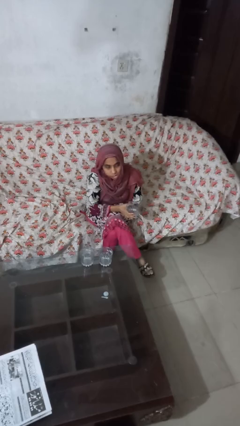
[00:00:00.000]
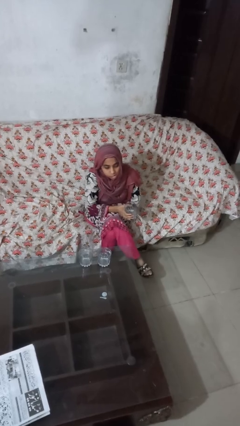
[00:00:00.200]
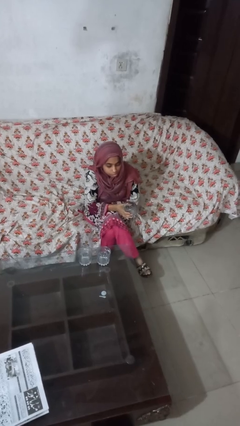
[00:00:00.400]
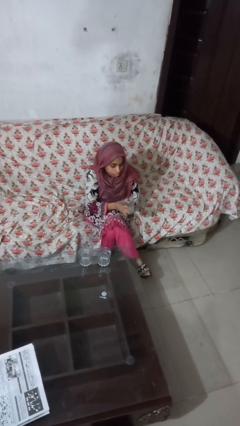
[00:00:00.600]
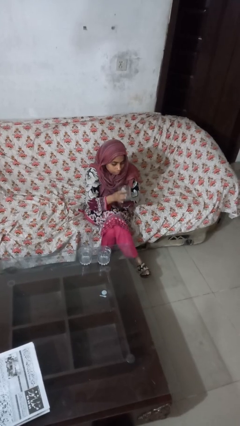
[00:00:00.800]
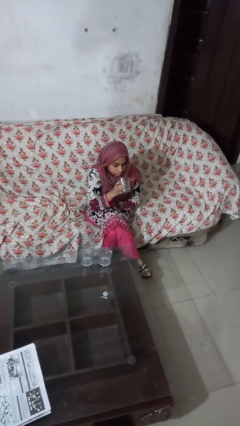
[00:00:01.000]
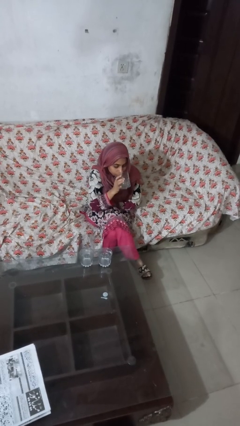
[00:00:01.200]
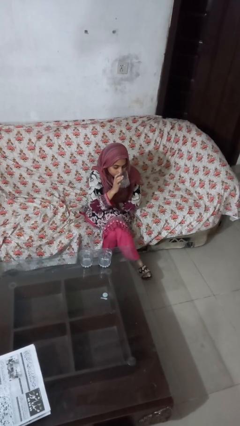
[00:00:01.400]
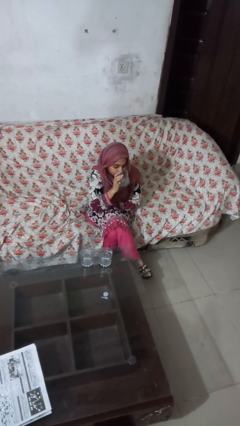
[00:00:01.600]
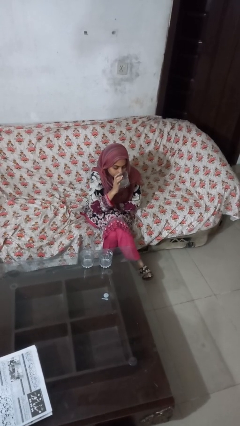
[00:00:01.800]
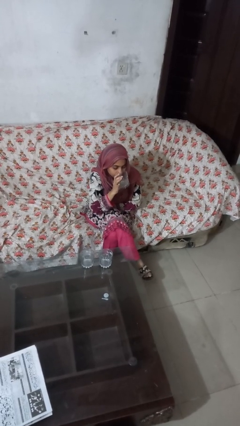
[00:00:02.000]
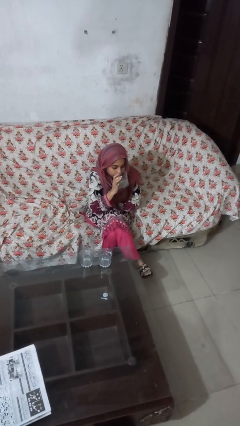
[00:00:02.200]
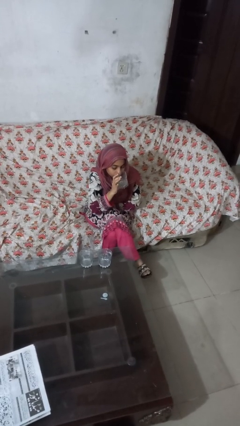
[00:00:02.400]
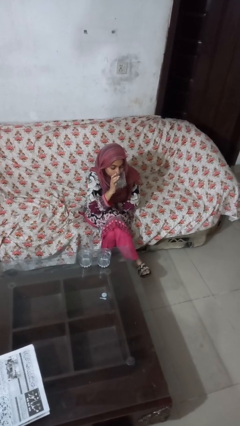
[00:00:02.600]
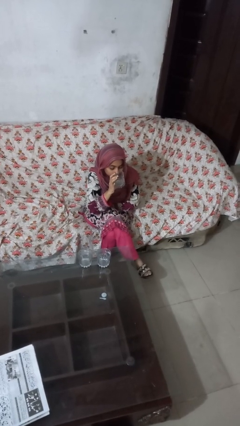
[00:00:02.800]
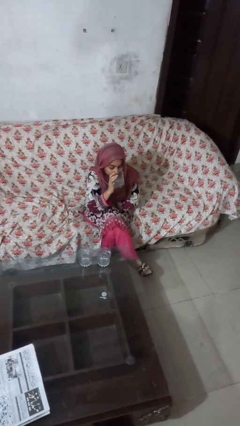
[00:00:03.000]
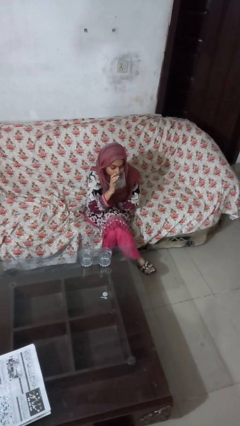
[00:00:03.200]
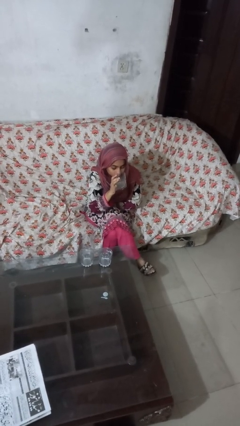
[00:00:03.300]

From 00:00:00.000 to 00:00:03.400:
person drinks from shotglass

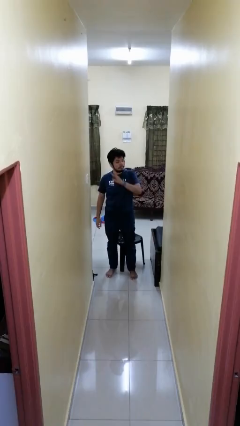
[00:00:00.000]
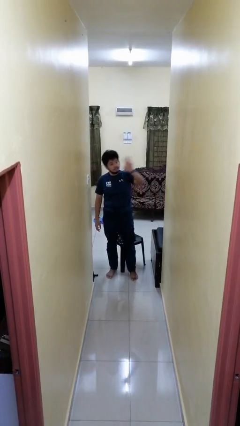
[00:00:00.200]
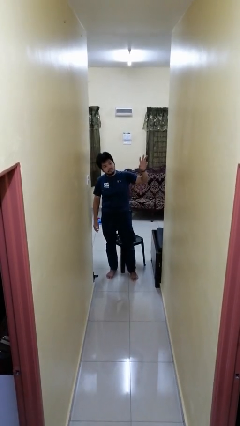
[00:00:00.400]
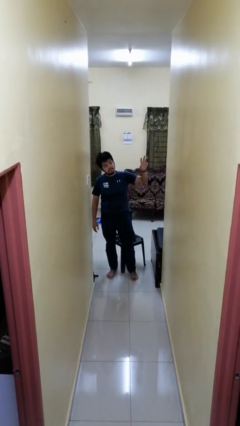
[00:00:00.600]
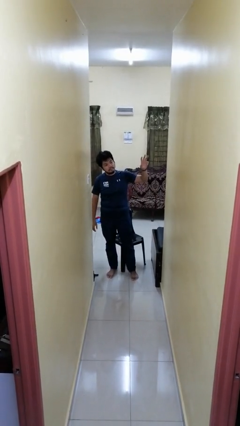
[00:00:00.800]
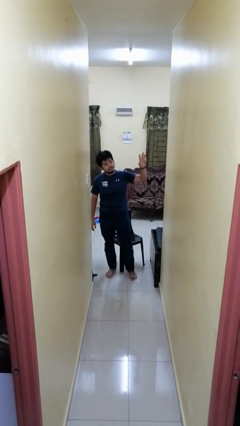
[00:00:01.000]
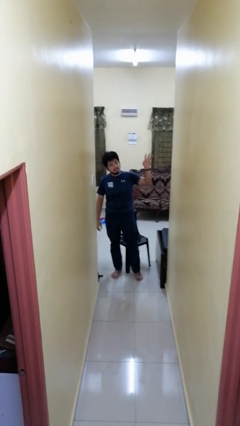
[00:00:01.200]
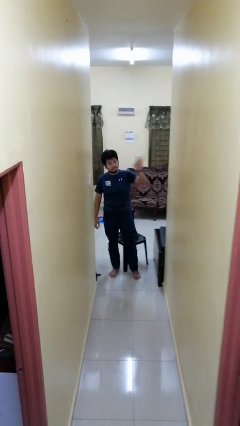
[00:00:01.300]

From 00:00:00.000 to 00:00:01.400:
person gestures swipe left

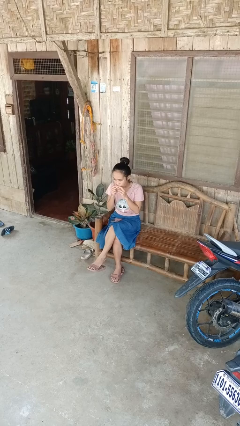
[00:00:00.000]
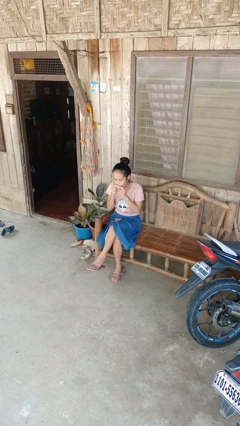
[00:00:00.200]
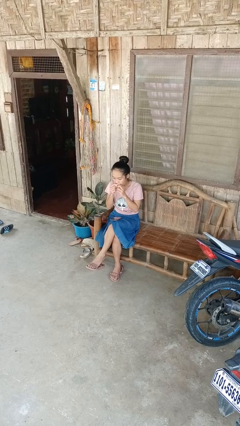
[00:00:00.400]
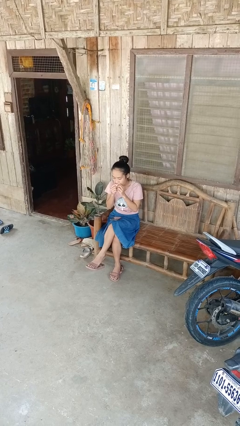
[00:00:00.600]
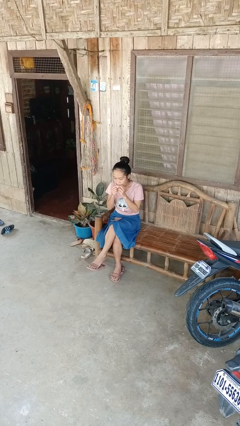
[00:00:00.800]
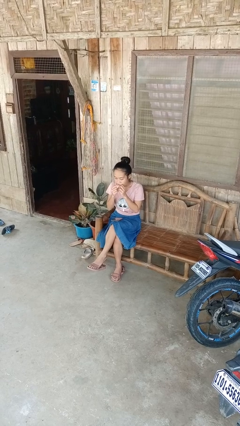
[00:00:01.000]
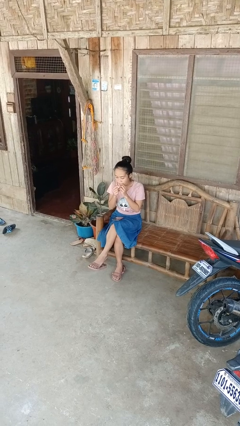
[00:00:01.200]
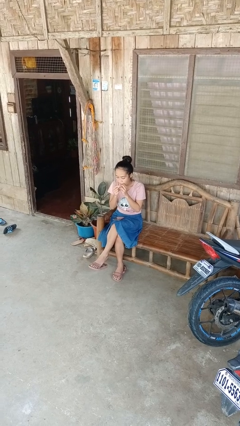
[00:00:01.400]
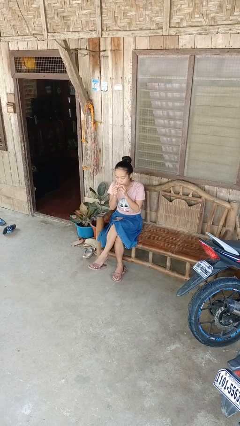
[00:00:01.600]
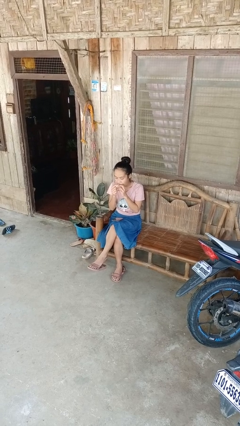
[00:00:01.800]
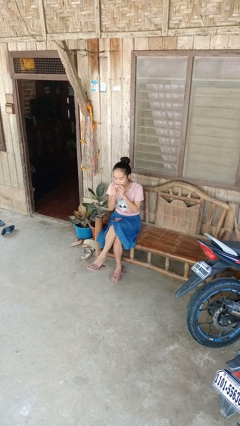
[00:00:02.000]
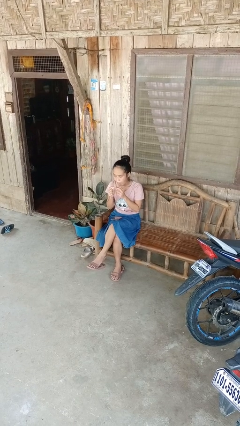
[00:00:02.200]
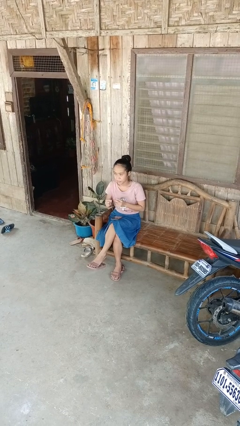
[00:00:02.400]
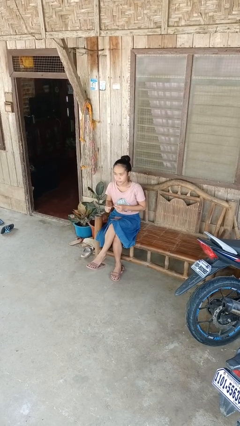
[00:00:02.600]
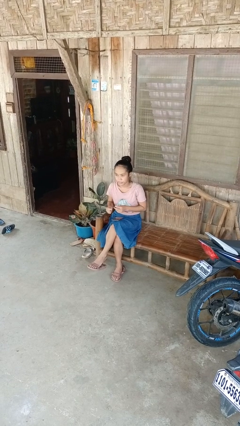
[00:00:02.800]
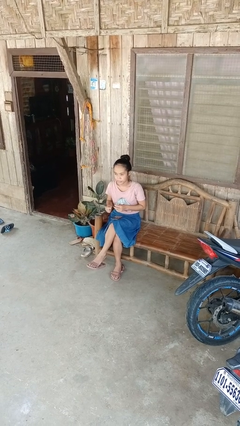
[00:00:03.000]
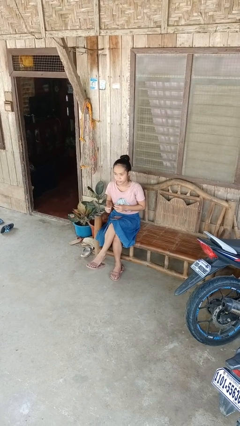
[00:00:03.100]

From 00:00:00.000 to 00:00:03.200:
person flosses

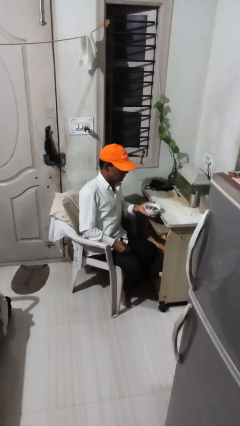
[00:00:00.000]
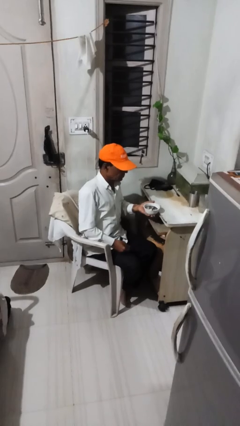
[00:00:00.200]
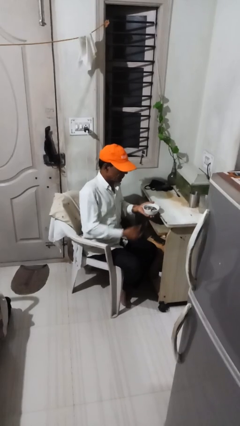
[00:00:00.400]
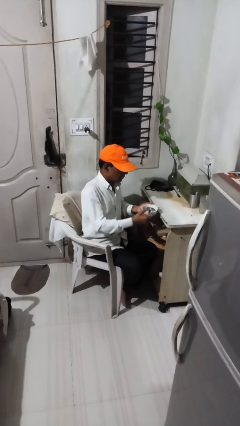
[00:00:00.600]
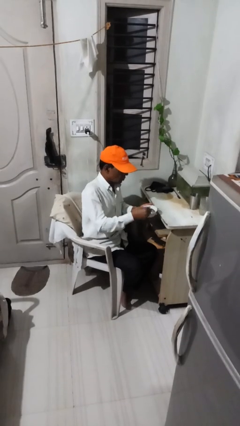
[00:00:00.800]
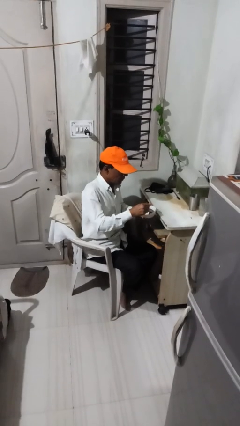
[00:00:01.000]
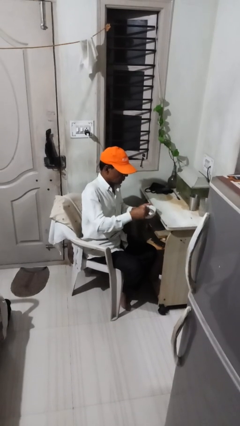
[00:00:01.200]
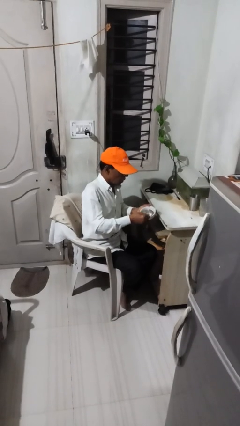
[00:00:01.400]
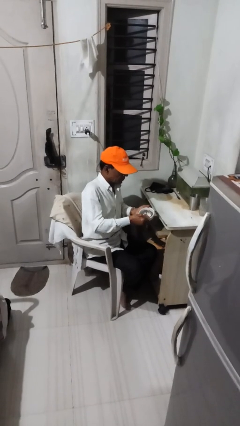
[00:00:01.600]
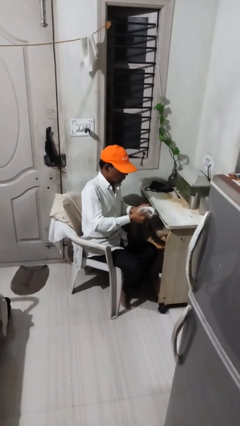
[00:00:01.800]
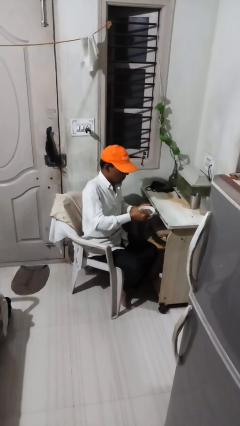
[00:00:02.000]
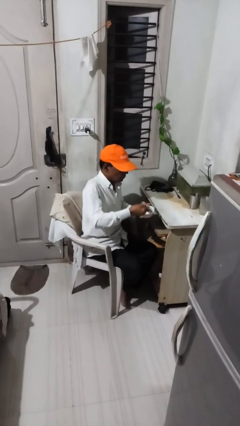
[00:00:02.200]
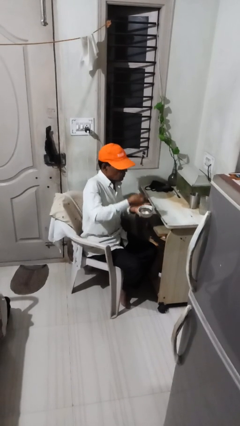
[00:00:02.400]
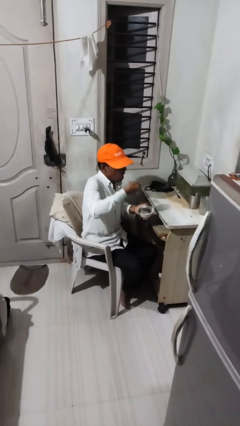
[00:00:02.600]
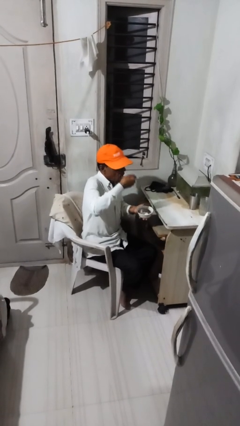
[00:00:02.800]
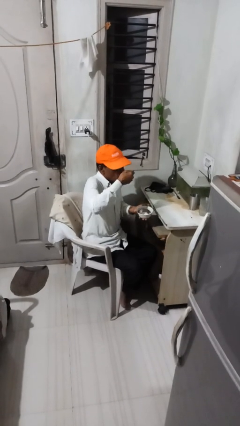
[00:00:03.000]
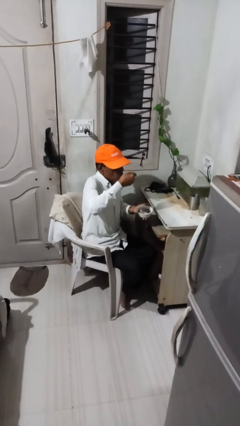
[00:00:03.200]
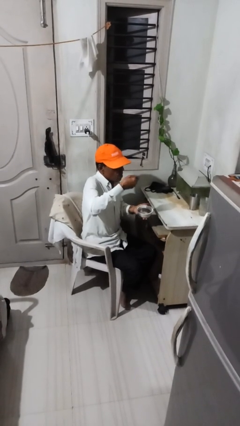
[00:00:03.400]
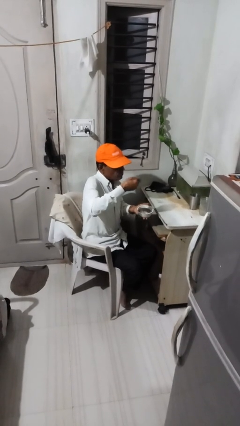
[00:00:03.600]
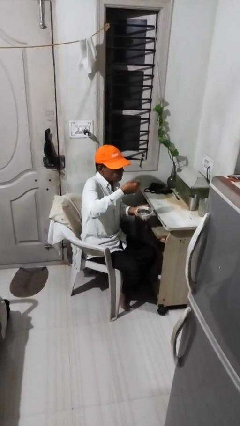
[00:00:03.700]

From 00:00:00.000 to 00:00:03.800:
person eats with utensil

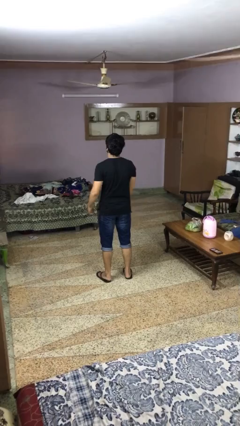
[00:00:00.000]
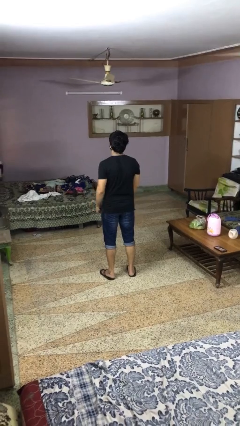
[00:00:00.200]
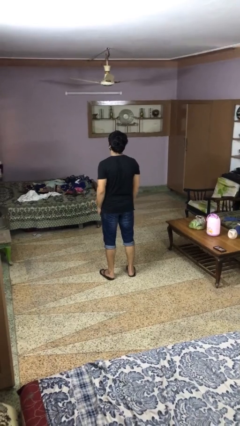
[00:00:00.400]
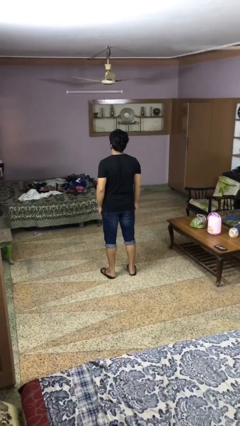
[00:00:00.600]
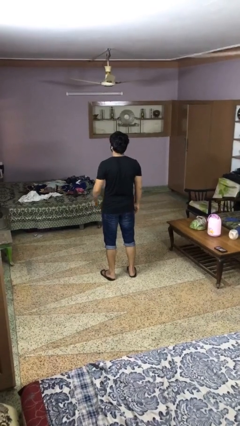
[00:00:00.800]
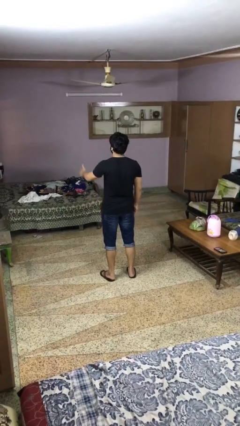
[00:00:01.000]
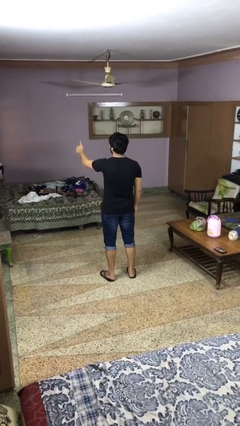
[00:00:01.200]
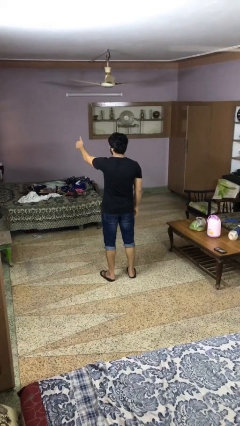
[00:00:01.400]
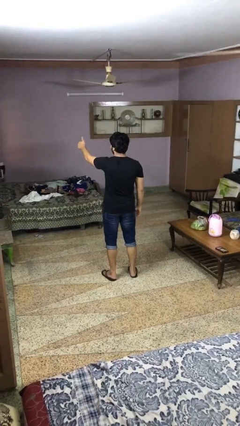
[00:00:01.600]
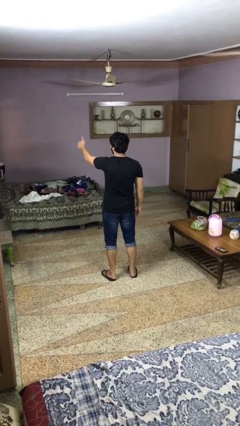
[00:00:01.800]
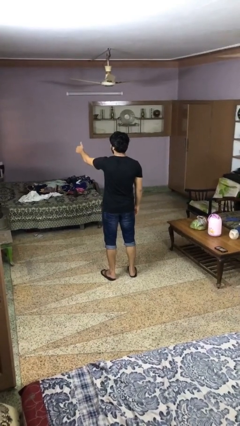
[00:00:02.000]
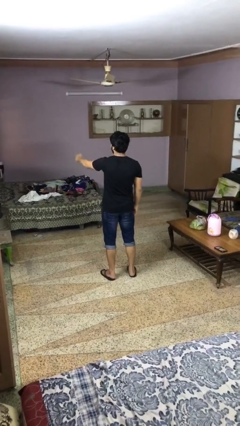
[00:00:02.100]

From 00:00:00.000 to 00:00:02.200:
person gestures thumbs up

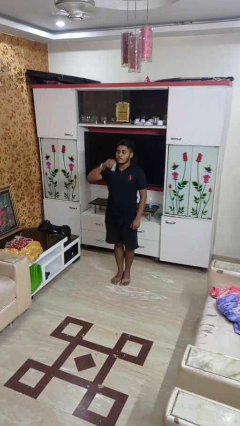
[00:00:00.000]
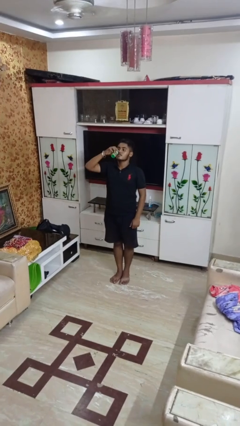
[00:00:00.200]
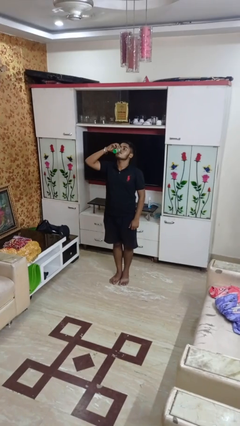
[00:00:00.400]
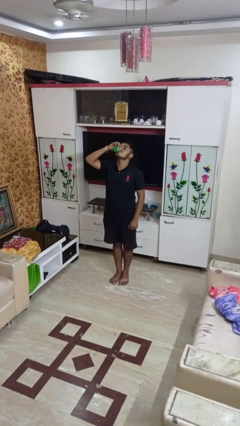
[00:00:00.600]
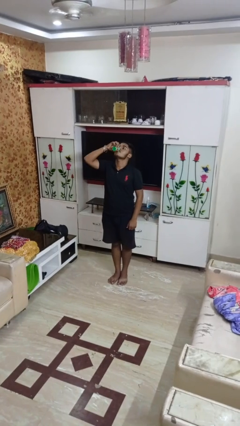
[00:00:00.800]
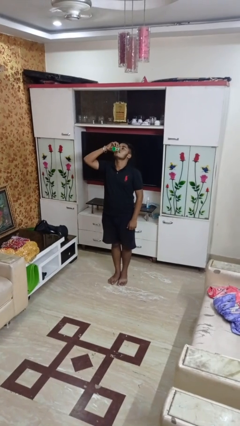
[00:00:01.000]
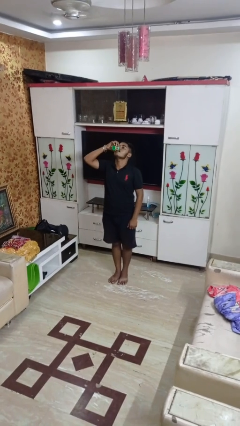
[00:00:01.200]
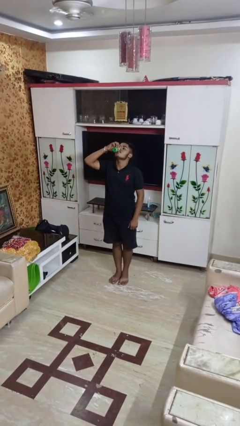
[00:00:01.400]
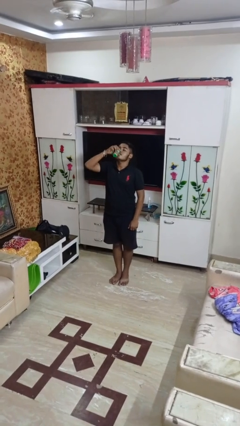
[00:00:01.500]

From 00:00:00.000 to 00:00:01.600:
person drinks from beverage can

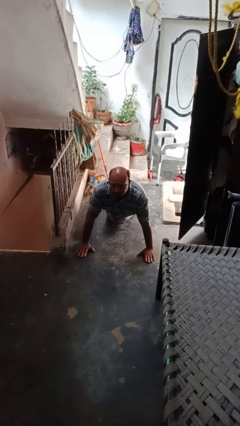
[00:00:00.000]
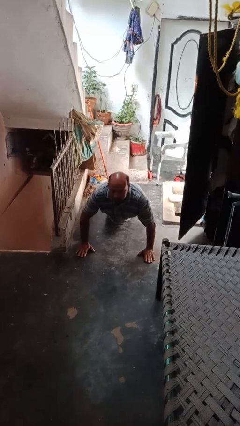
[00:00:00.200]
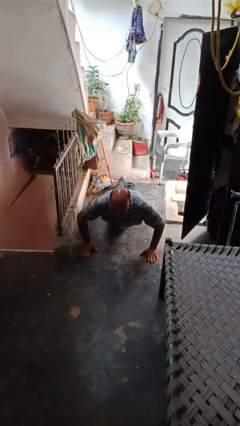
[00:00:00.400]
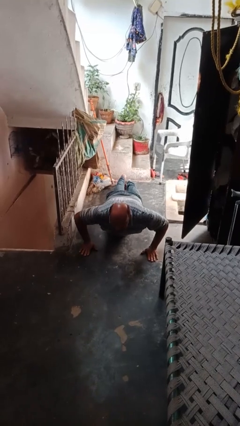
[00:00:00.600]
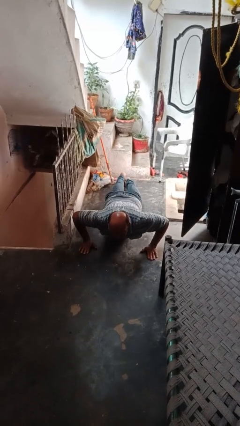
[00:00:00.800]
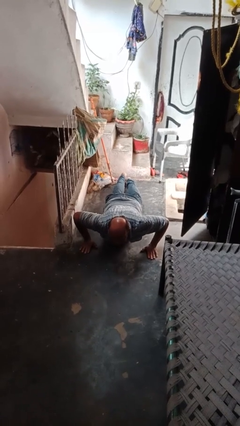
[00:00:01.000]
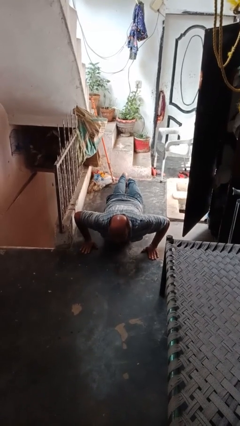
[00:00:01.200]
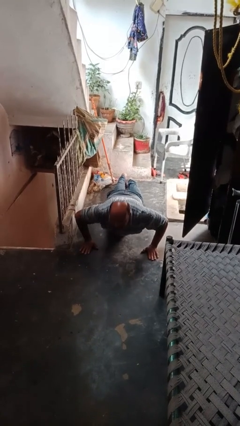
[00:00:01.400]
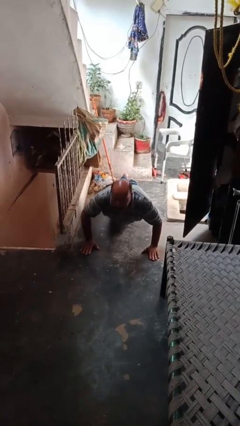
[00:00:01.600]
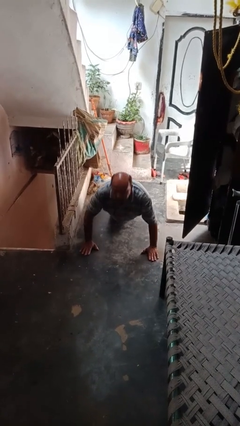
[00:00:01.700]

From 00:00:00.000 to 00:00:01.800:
person exercises with pushup
